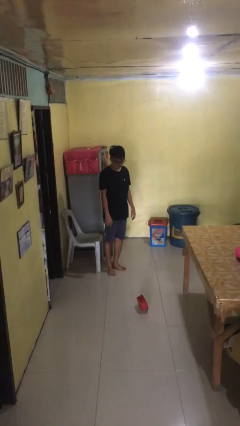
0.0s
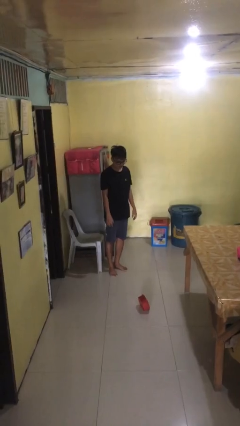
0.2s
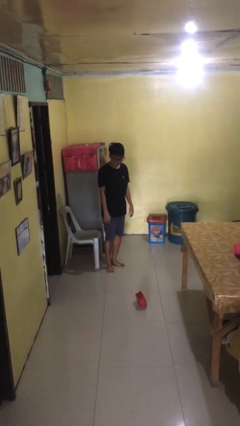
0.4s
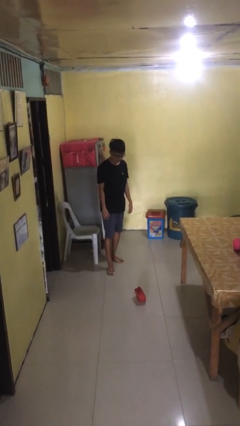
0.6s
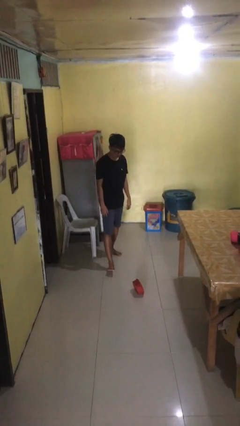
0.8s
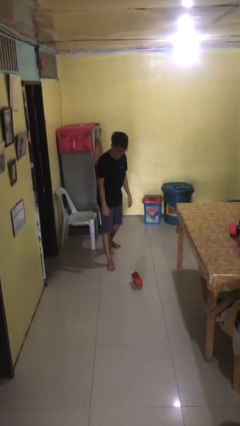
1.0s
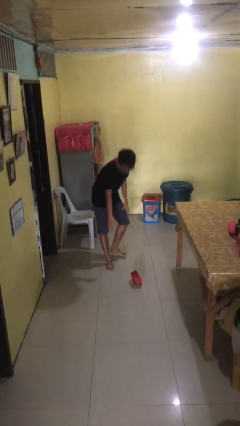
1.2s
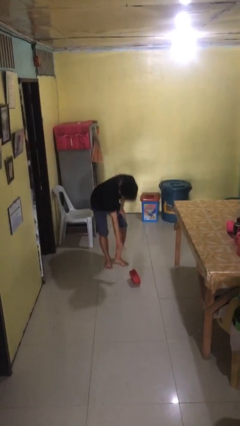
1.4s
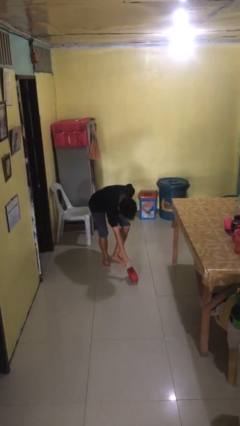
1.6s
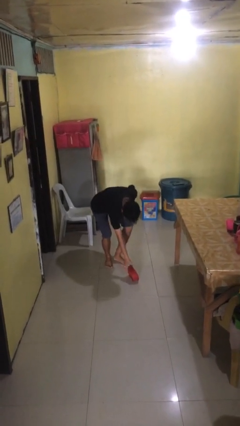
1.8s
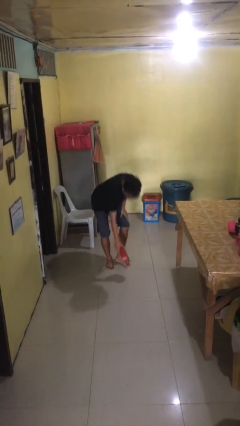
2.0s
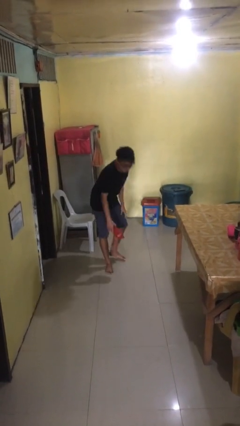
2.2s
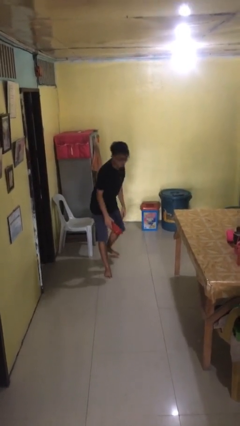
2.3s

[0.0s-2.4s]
person picks up object from floor

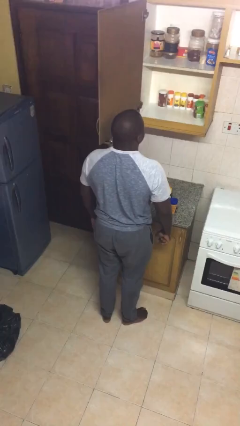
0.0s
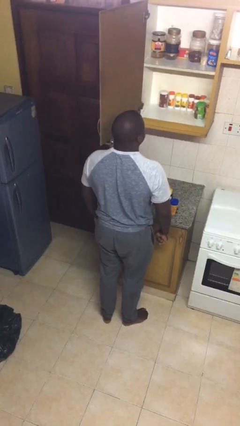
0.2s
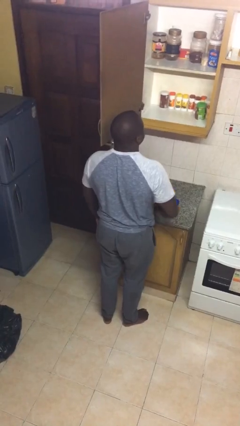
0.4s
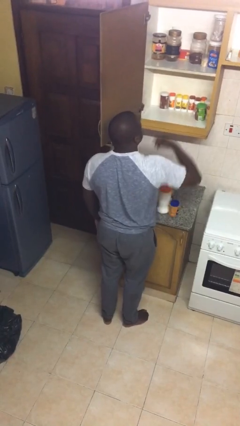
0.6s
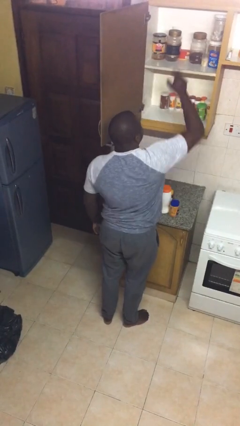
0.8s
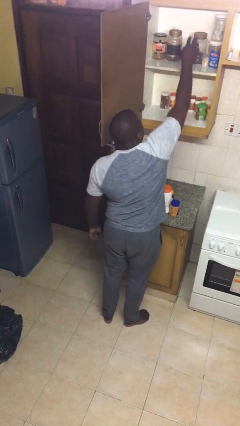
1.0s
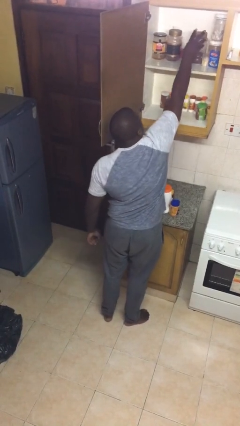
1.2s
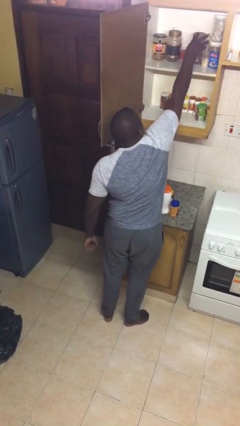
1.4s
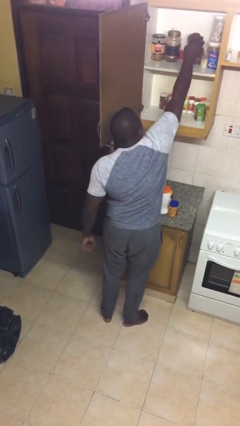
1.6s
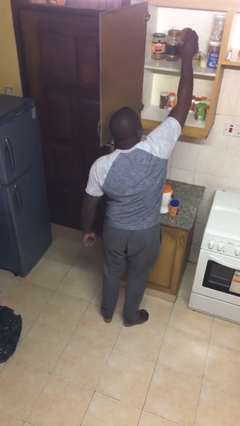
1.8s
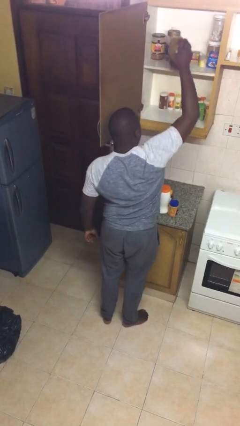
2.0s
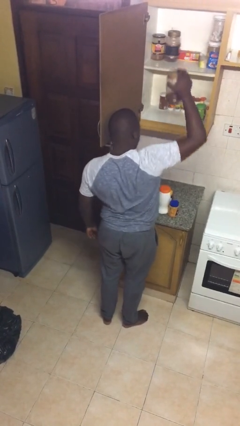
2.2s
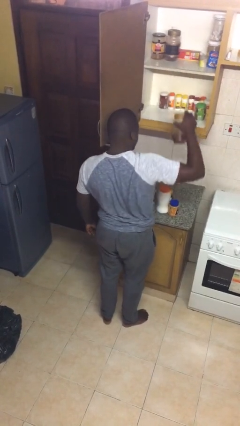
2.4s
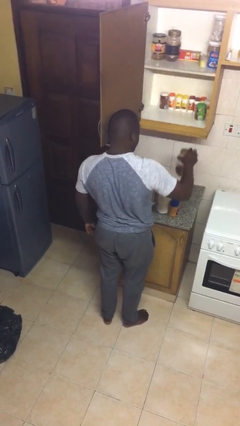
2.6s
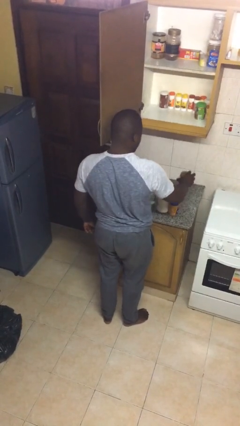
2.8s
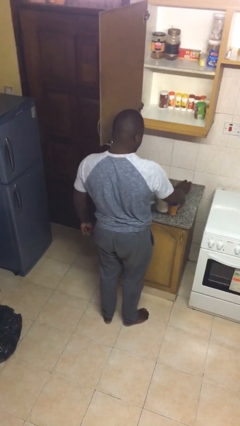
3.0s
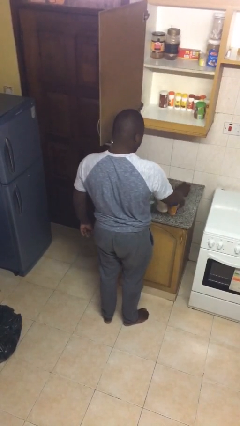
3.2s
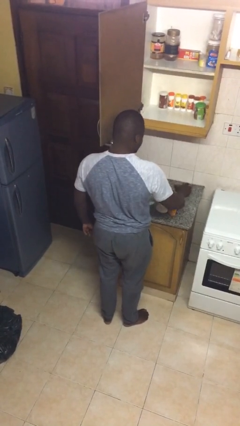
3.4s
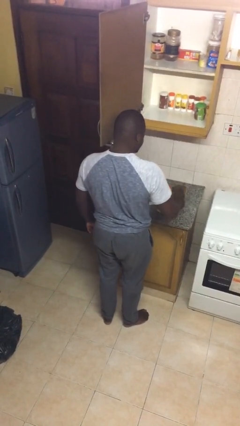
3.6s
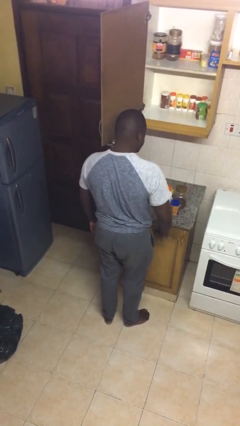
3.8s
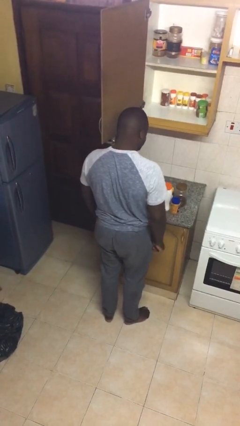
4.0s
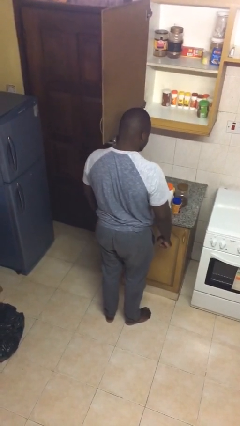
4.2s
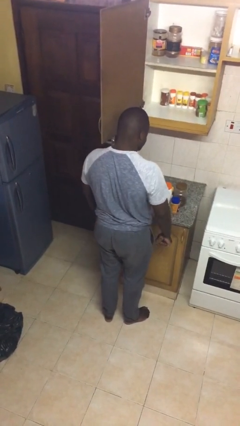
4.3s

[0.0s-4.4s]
person takes object from cabinet

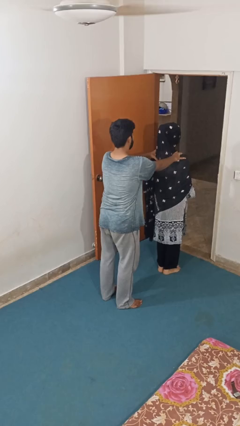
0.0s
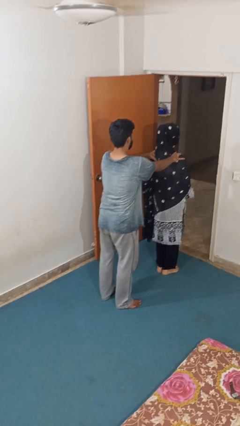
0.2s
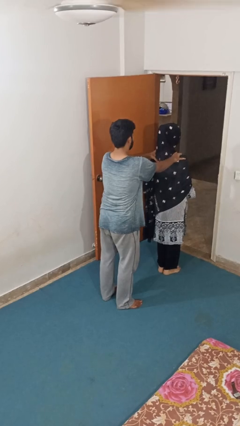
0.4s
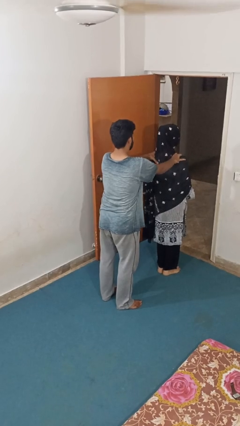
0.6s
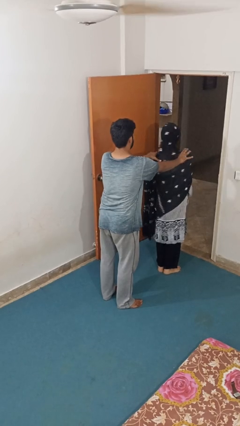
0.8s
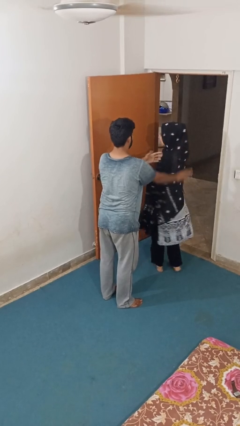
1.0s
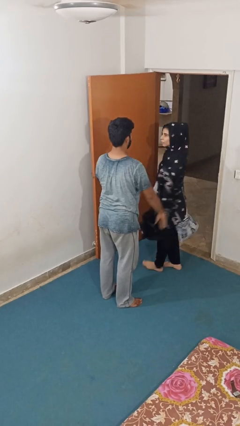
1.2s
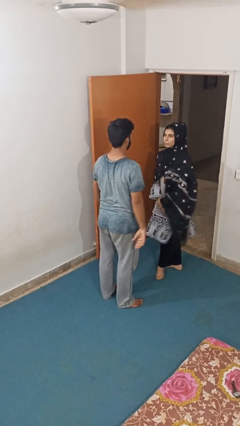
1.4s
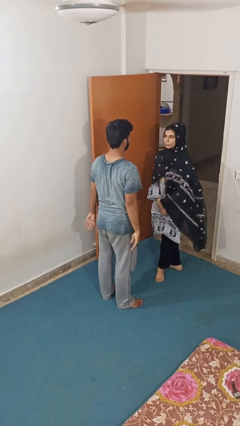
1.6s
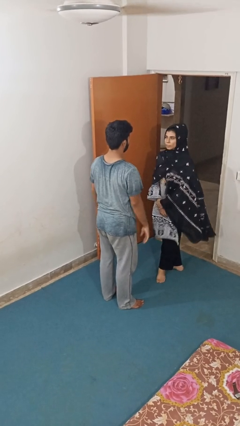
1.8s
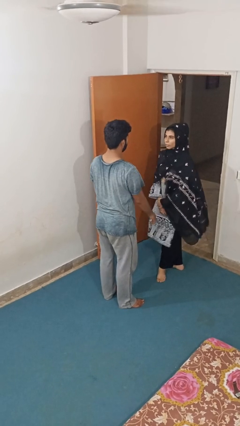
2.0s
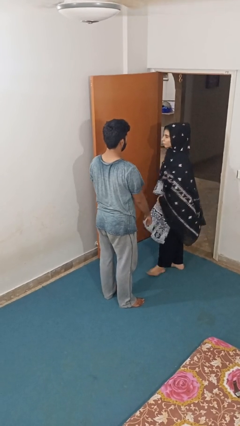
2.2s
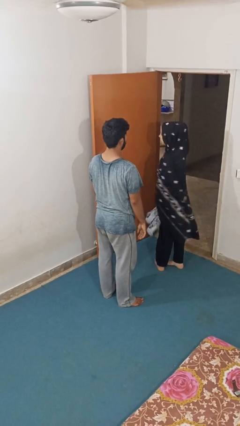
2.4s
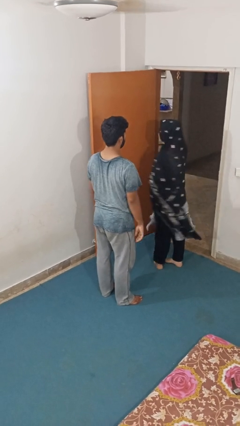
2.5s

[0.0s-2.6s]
person spins person around

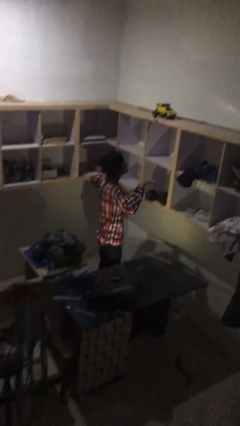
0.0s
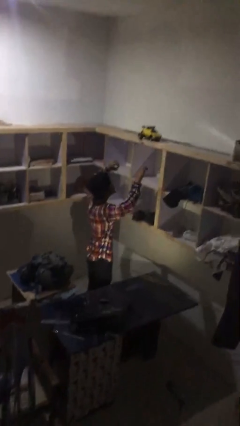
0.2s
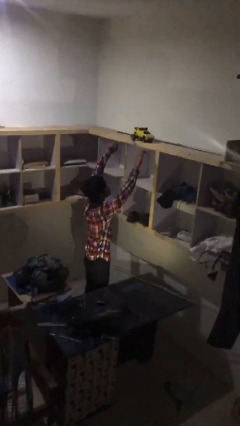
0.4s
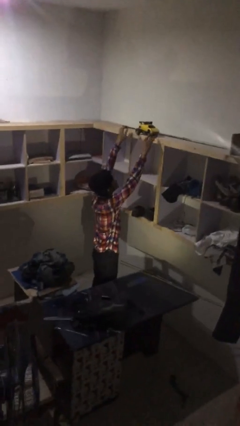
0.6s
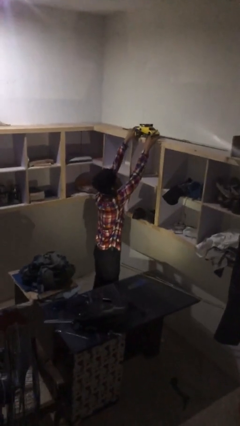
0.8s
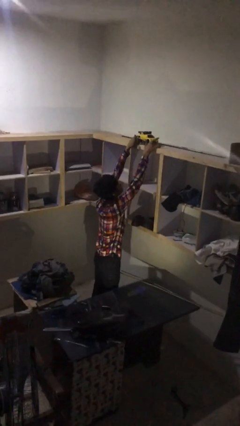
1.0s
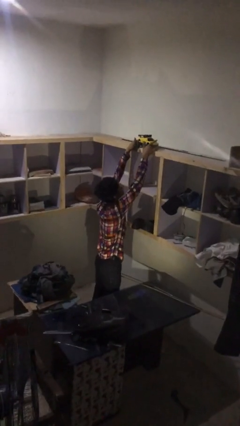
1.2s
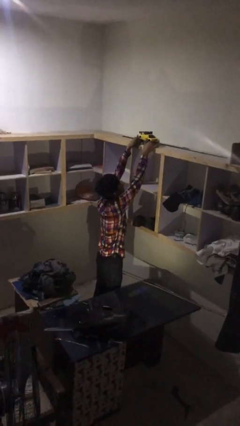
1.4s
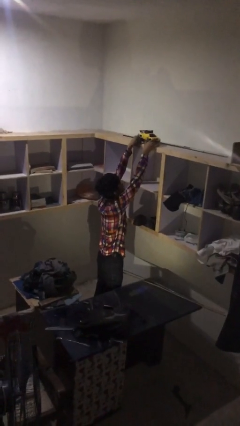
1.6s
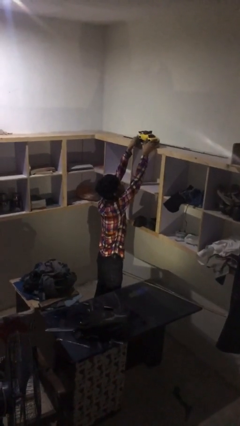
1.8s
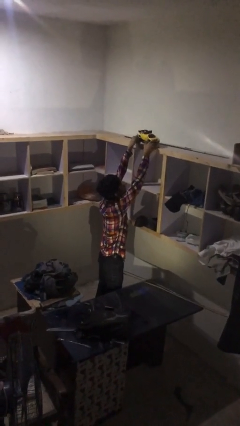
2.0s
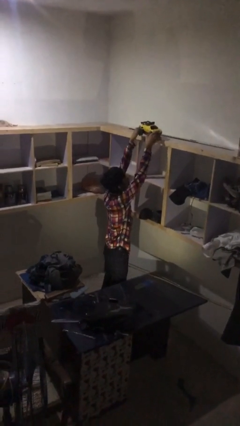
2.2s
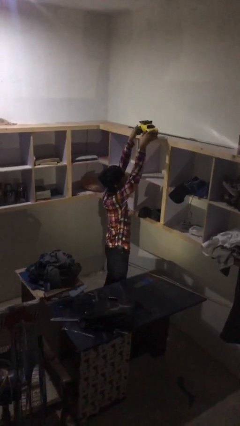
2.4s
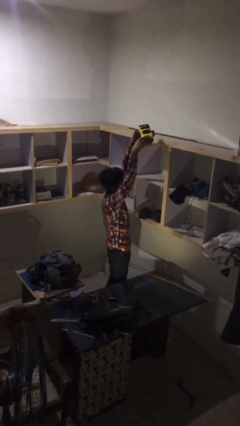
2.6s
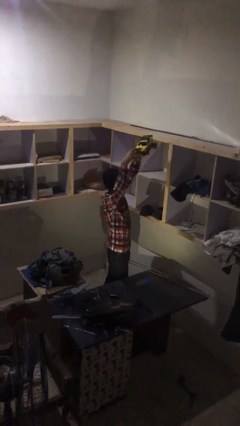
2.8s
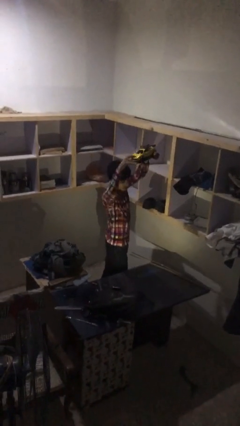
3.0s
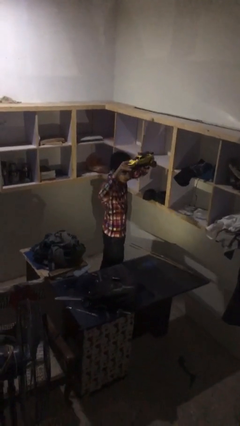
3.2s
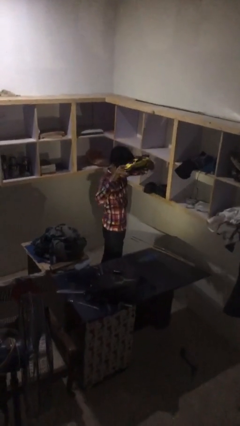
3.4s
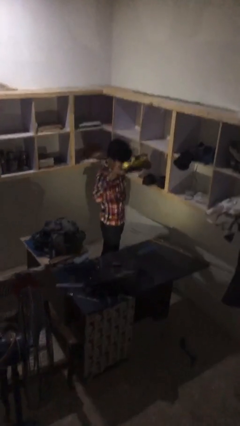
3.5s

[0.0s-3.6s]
person picks up object from shelf

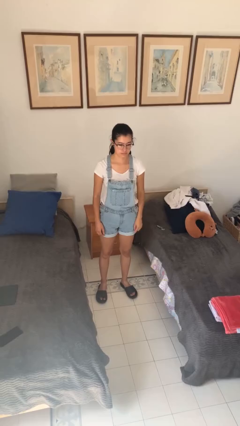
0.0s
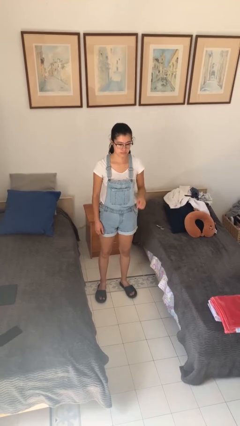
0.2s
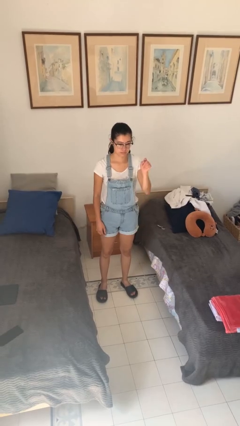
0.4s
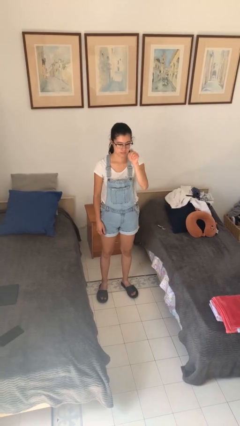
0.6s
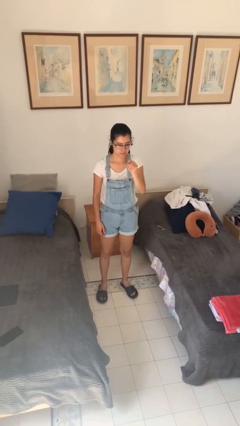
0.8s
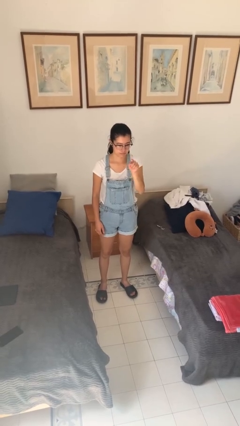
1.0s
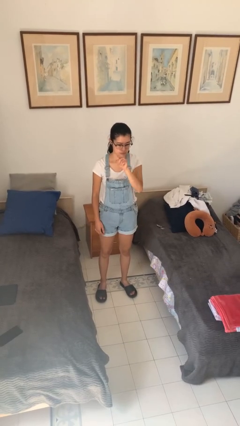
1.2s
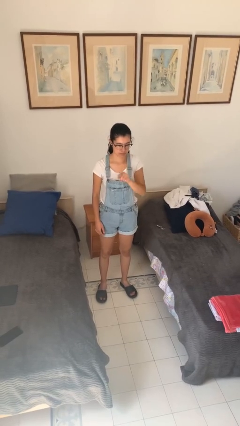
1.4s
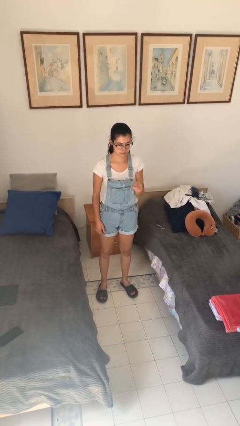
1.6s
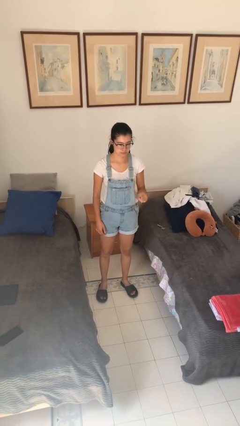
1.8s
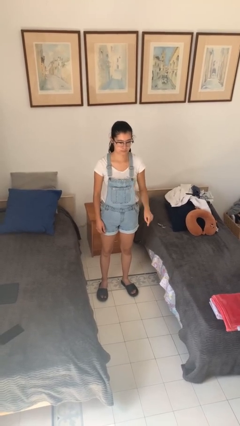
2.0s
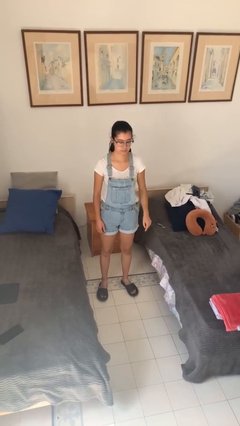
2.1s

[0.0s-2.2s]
person gestures number three

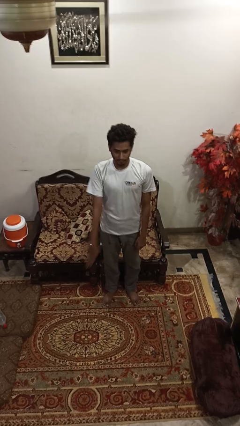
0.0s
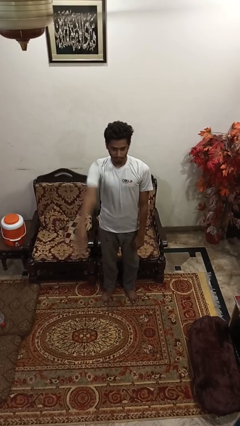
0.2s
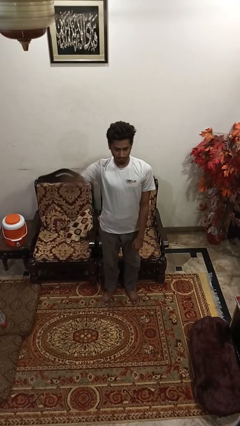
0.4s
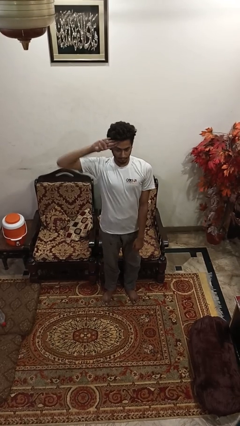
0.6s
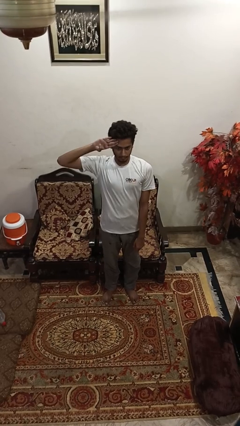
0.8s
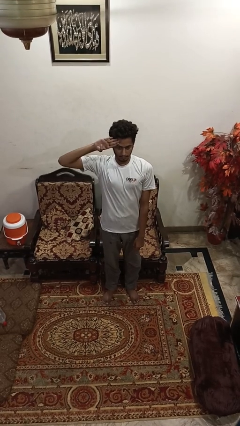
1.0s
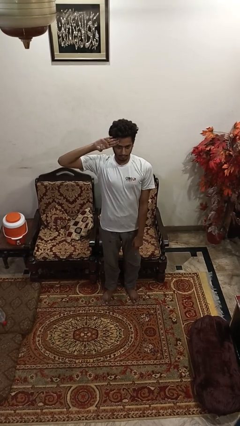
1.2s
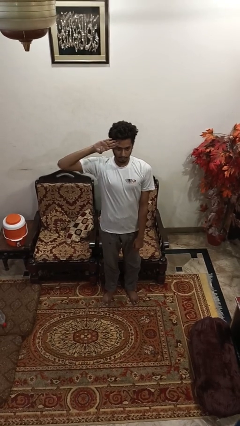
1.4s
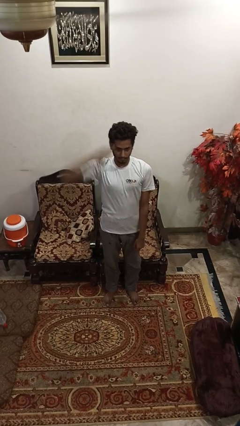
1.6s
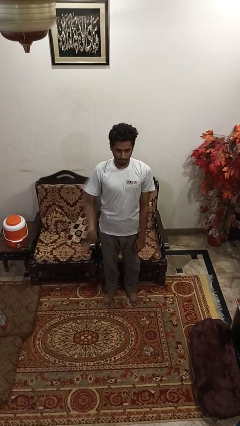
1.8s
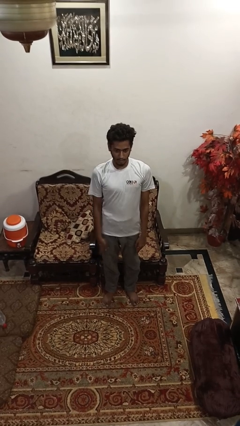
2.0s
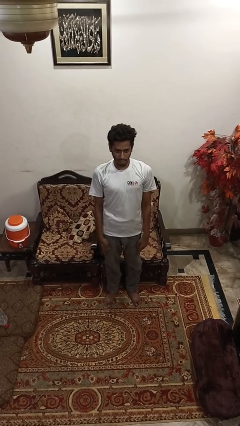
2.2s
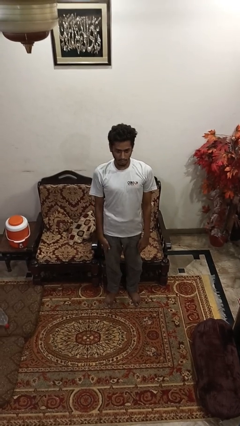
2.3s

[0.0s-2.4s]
person salutes
